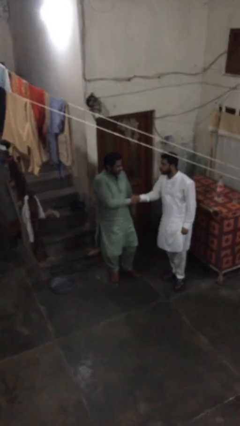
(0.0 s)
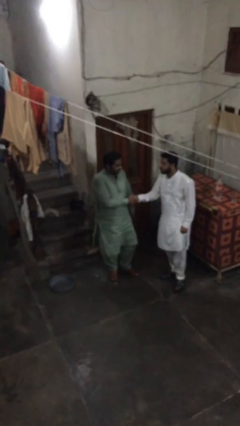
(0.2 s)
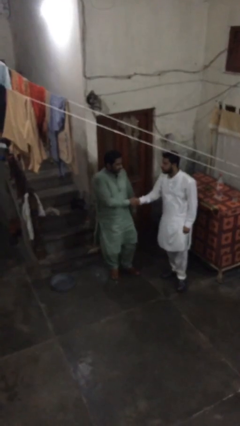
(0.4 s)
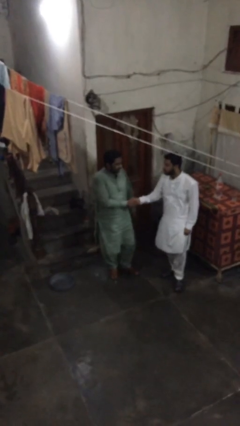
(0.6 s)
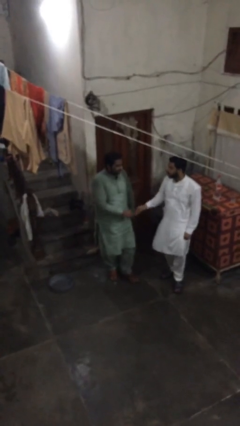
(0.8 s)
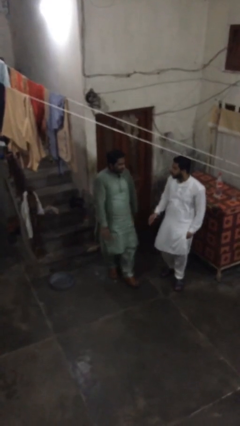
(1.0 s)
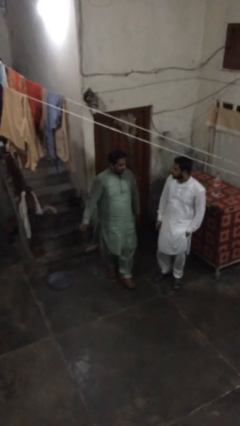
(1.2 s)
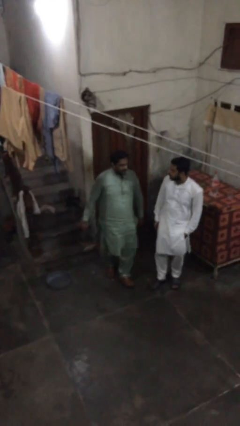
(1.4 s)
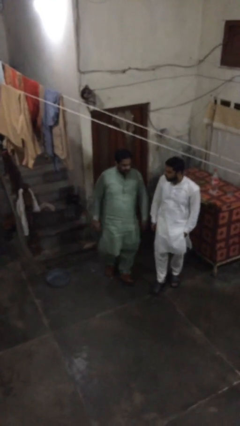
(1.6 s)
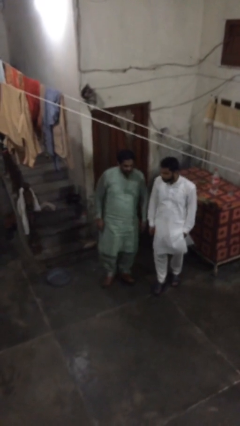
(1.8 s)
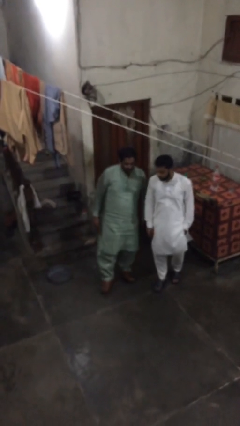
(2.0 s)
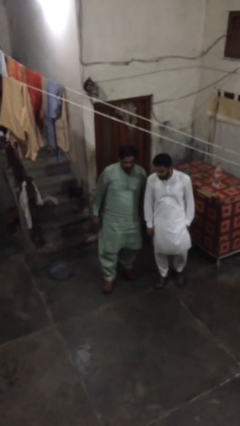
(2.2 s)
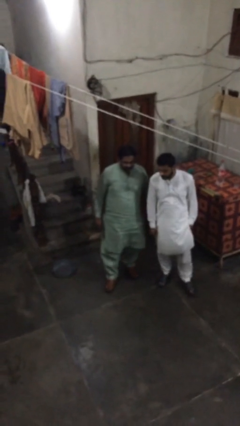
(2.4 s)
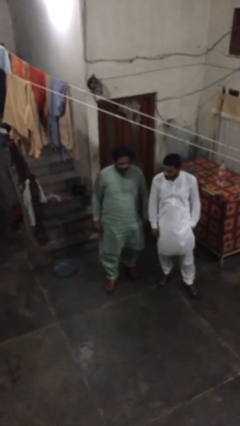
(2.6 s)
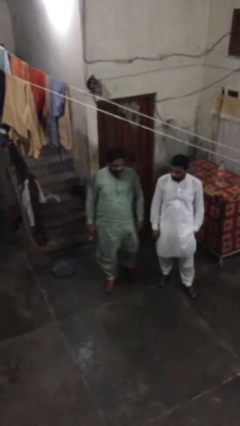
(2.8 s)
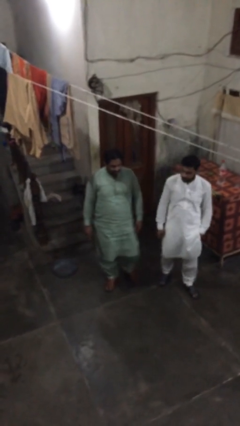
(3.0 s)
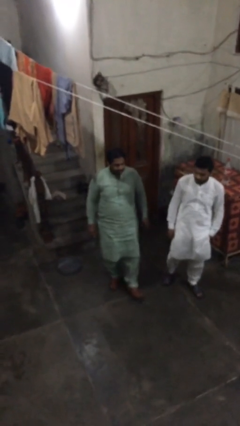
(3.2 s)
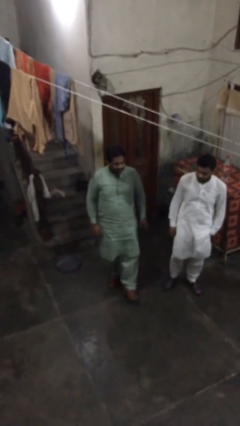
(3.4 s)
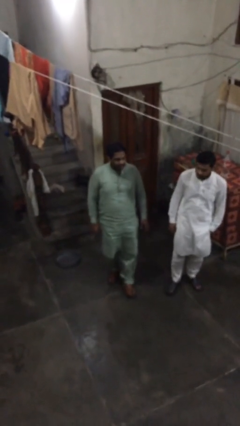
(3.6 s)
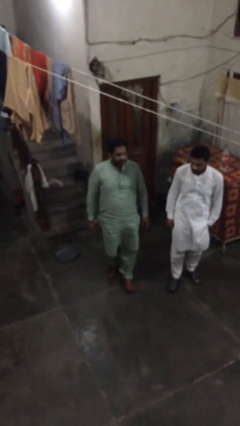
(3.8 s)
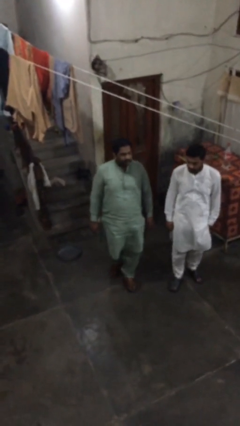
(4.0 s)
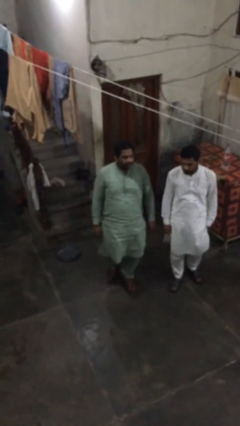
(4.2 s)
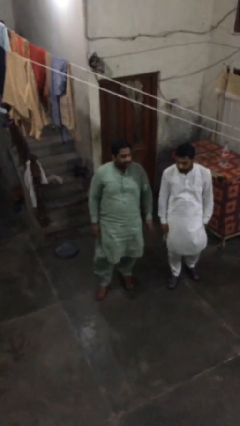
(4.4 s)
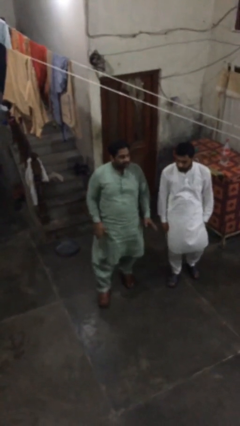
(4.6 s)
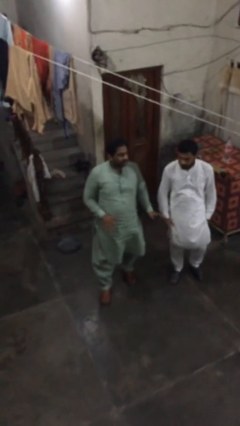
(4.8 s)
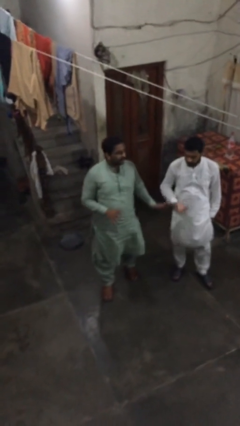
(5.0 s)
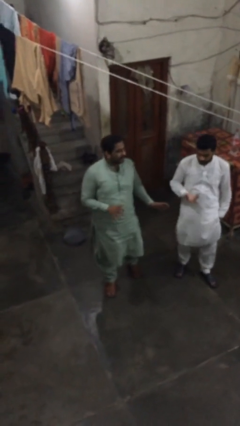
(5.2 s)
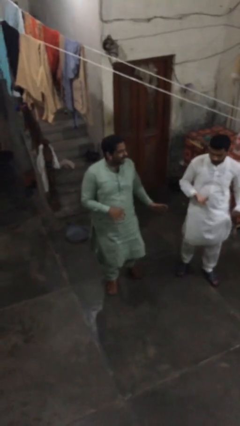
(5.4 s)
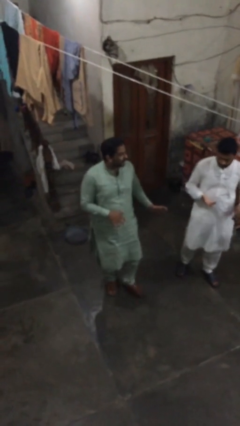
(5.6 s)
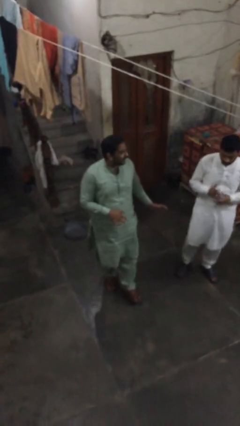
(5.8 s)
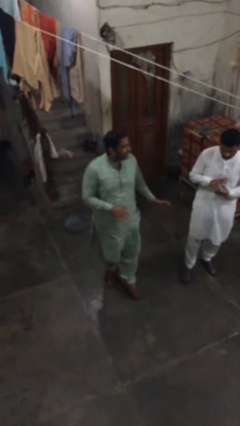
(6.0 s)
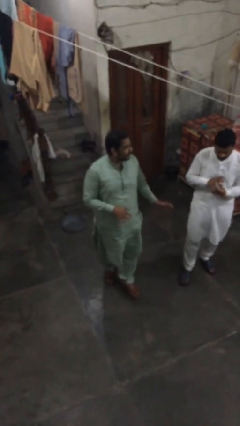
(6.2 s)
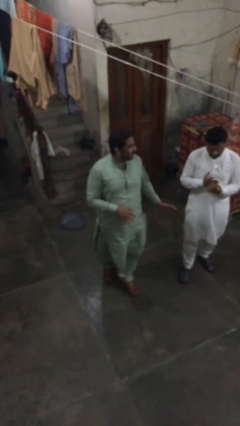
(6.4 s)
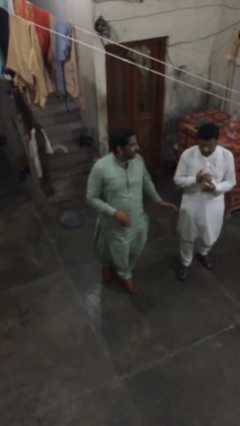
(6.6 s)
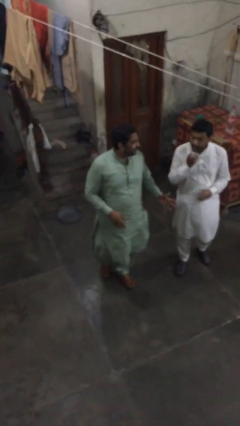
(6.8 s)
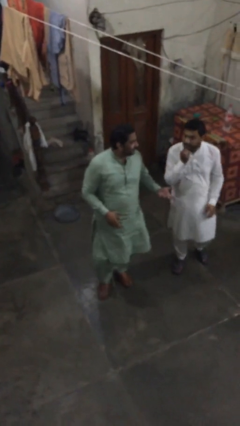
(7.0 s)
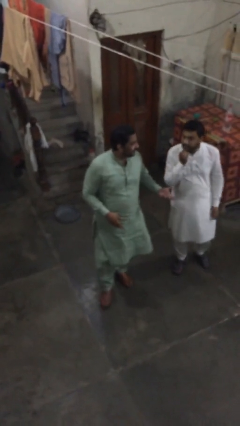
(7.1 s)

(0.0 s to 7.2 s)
person talks to person

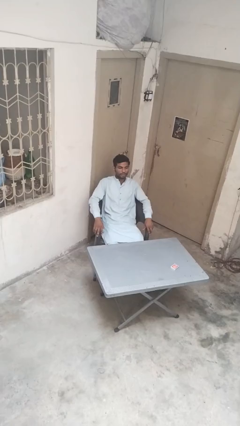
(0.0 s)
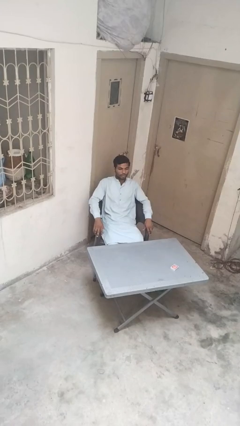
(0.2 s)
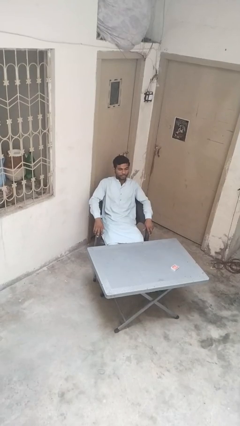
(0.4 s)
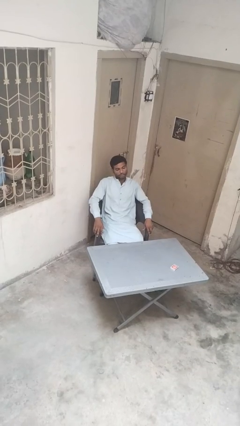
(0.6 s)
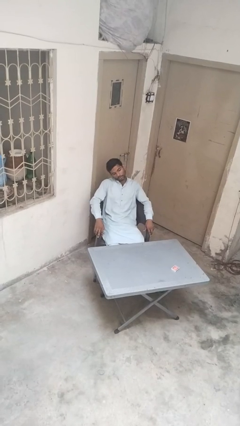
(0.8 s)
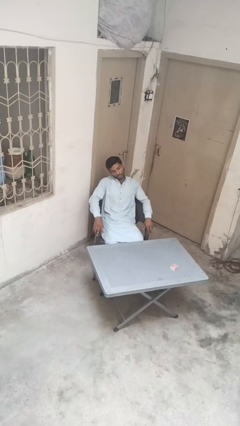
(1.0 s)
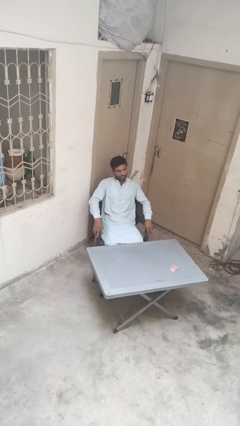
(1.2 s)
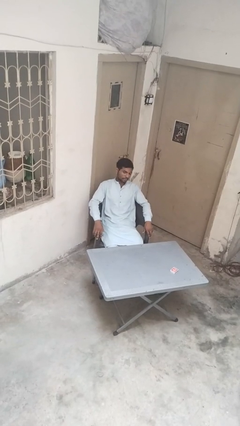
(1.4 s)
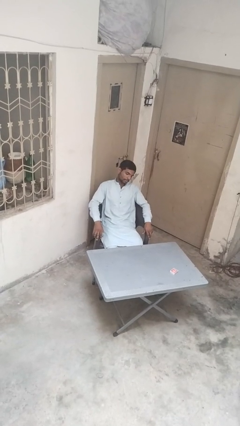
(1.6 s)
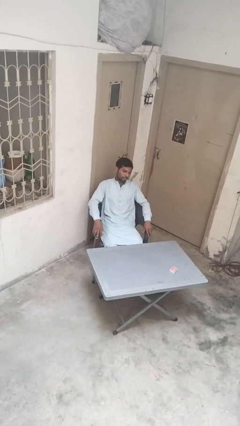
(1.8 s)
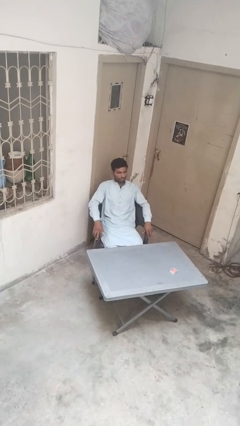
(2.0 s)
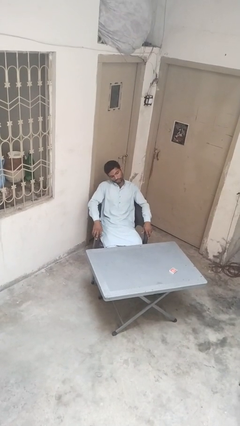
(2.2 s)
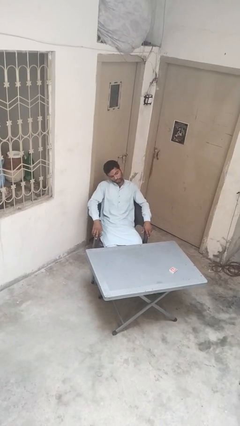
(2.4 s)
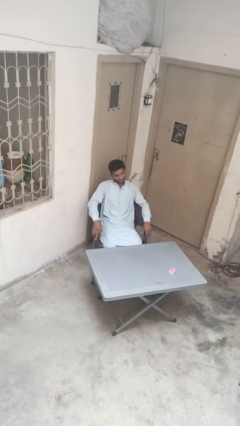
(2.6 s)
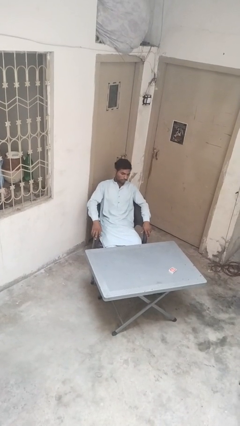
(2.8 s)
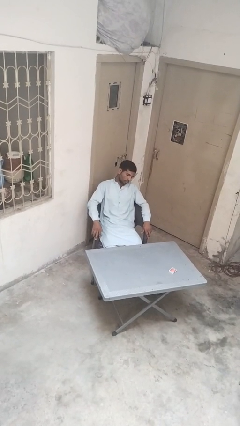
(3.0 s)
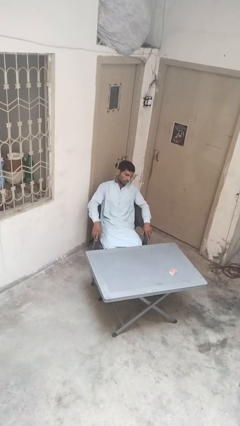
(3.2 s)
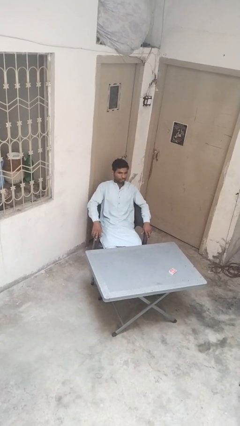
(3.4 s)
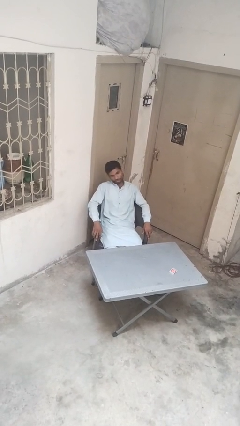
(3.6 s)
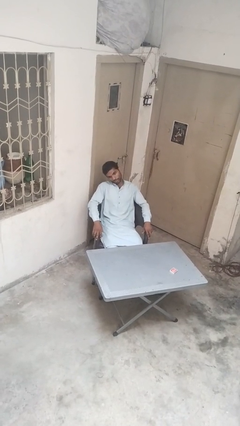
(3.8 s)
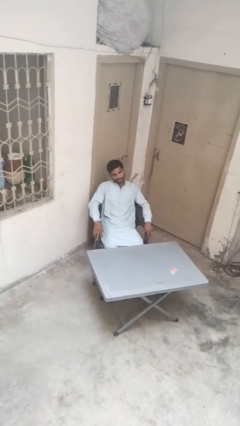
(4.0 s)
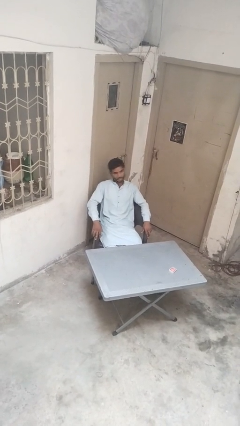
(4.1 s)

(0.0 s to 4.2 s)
person shakes head

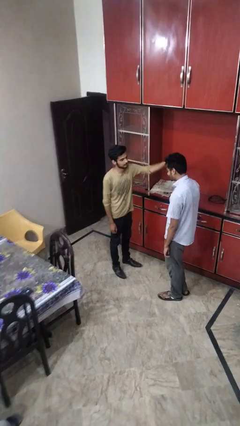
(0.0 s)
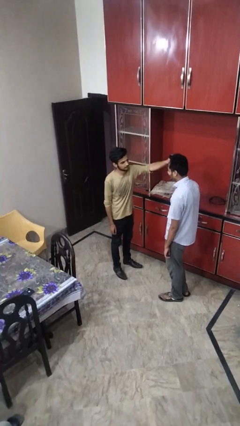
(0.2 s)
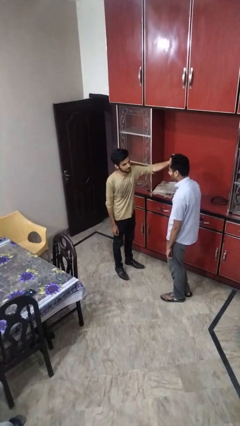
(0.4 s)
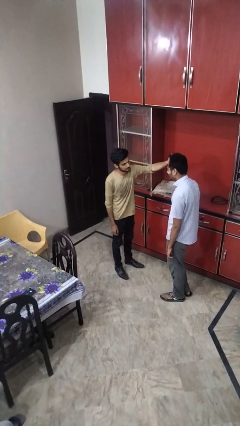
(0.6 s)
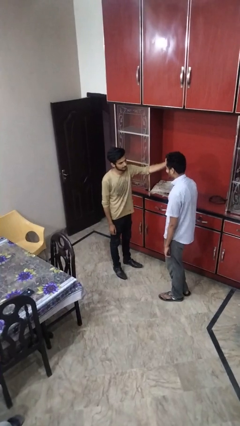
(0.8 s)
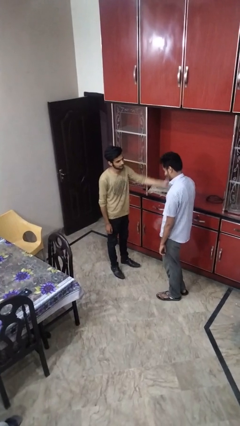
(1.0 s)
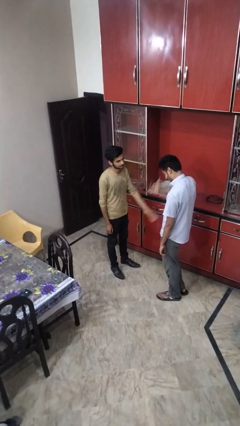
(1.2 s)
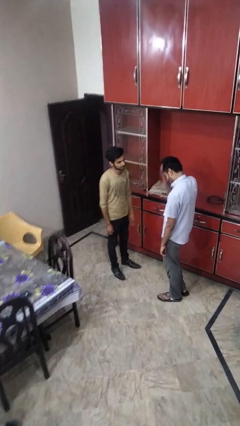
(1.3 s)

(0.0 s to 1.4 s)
person grabs person by hair

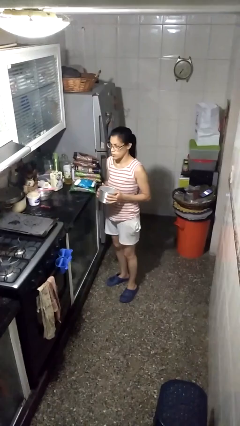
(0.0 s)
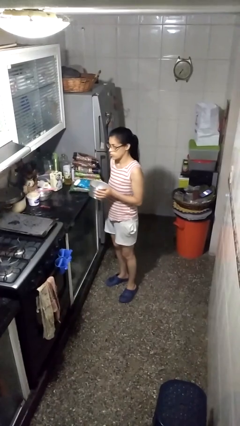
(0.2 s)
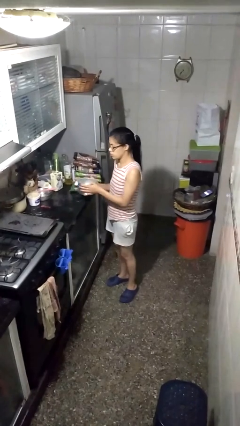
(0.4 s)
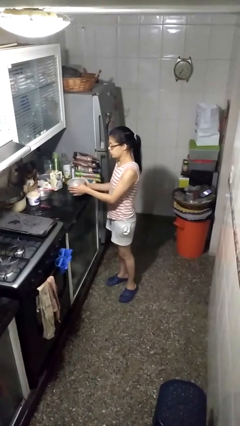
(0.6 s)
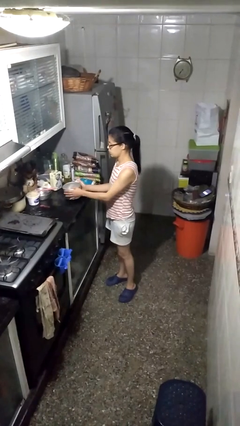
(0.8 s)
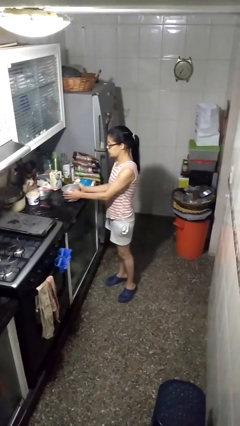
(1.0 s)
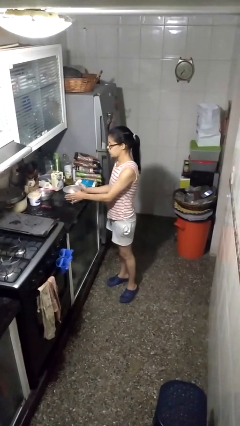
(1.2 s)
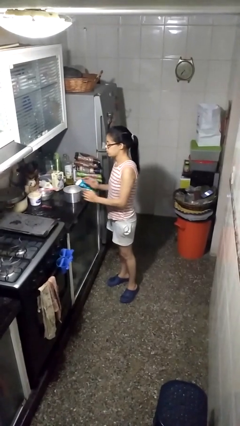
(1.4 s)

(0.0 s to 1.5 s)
person puts down object on countertop

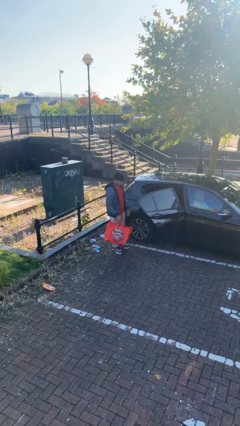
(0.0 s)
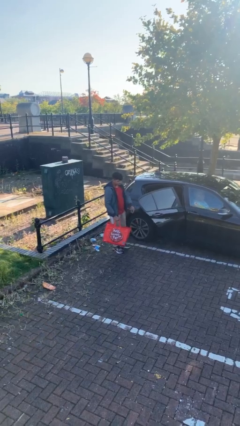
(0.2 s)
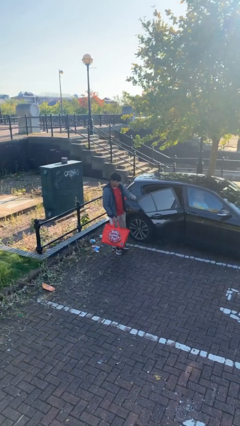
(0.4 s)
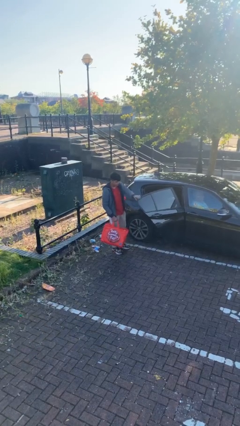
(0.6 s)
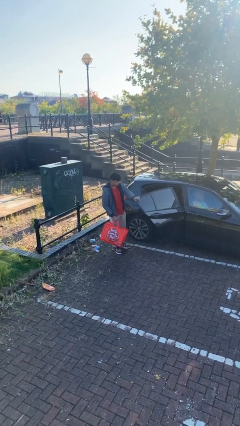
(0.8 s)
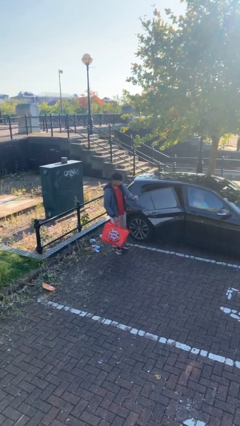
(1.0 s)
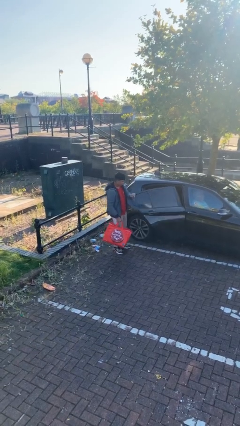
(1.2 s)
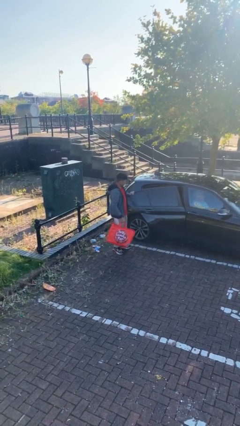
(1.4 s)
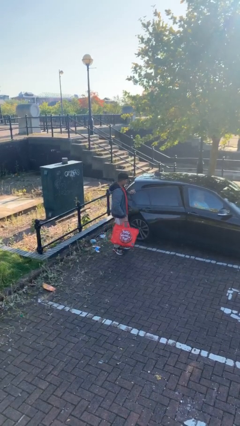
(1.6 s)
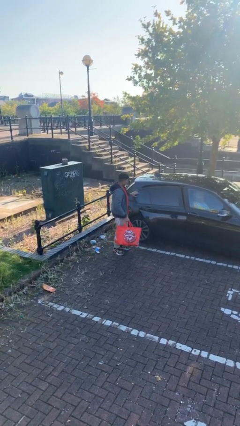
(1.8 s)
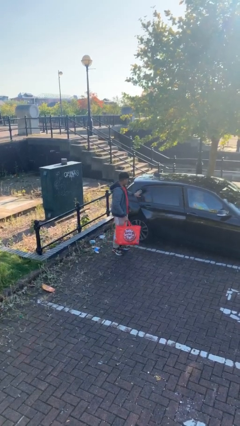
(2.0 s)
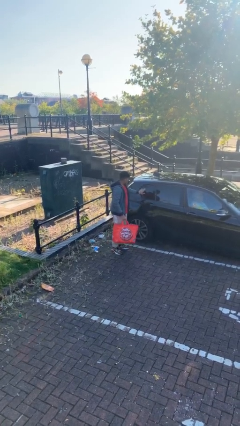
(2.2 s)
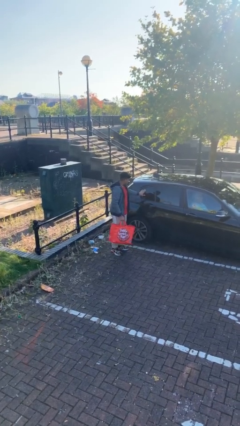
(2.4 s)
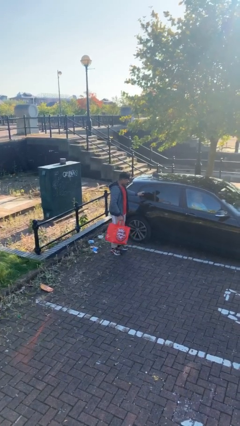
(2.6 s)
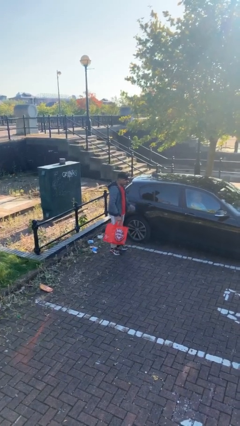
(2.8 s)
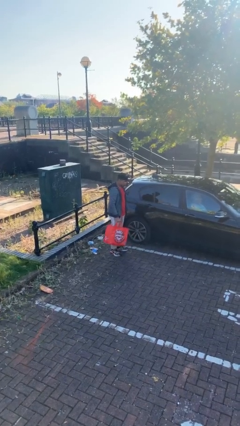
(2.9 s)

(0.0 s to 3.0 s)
person closes car door

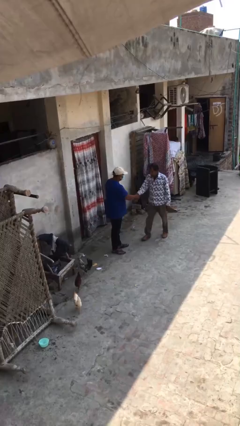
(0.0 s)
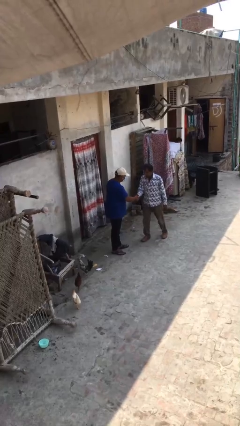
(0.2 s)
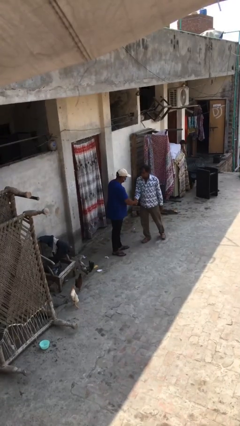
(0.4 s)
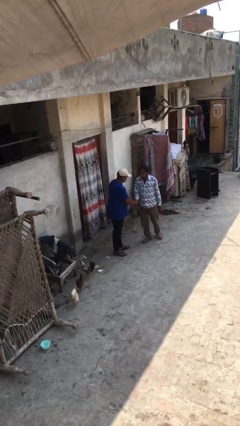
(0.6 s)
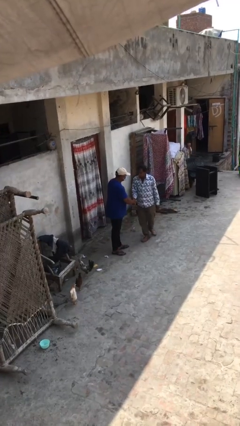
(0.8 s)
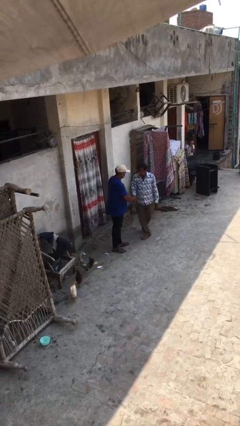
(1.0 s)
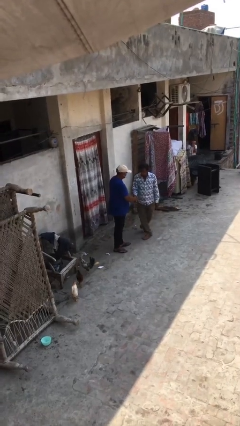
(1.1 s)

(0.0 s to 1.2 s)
person shakes hand
